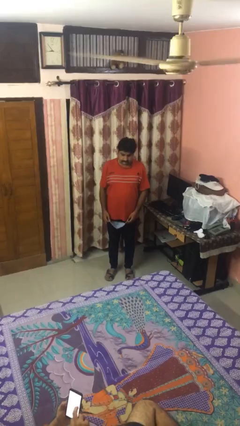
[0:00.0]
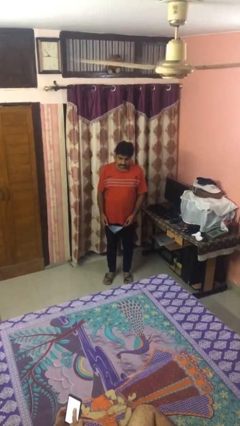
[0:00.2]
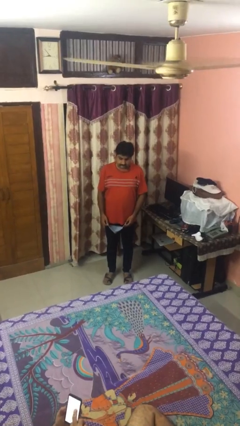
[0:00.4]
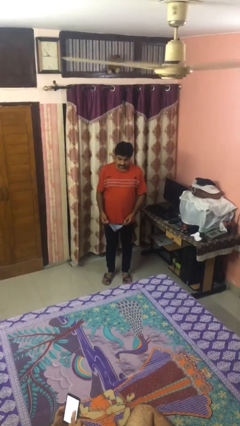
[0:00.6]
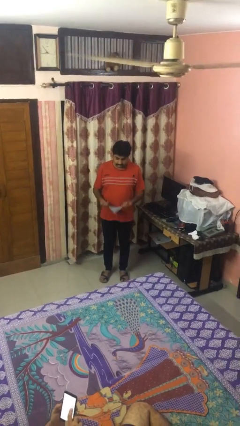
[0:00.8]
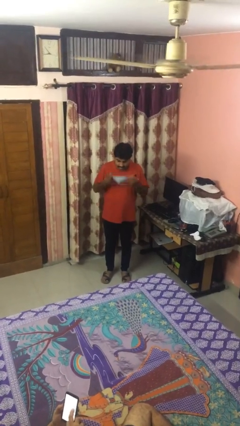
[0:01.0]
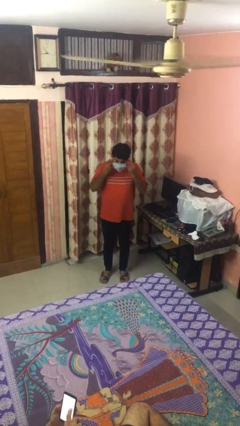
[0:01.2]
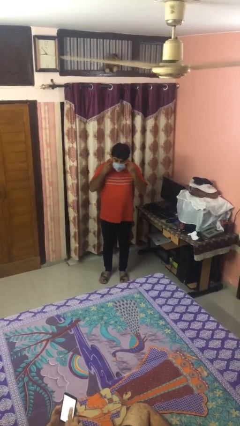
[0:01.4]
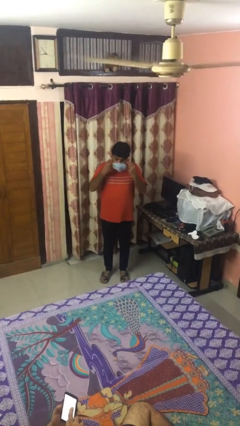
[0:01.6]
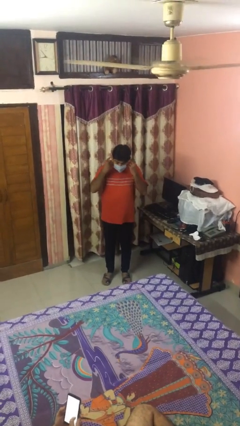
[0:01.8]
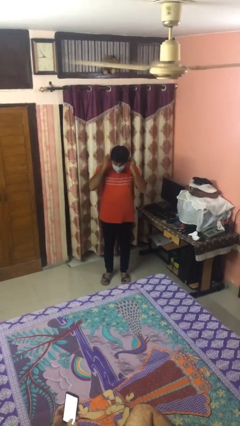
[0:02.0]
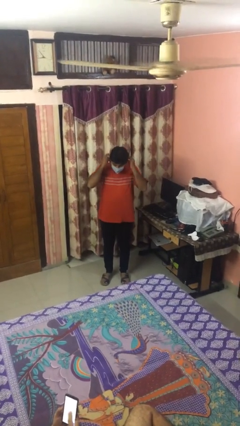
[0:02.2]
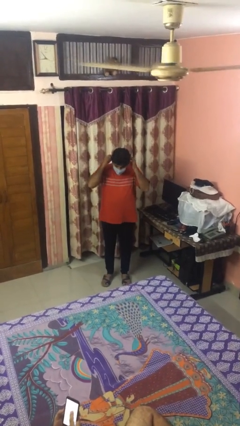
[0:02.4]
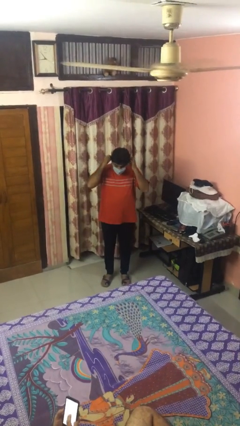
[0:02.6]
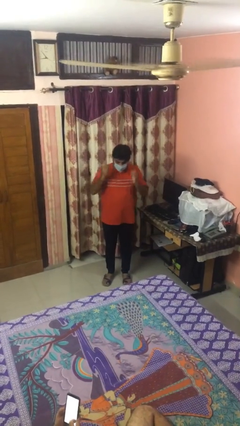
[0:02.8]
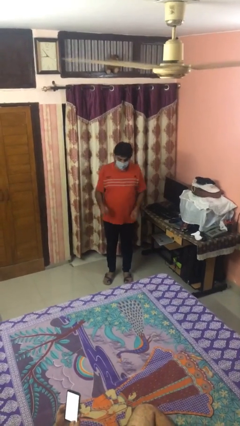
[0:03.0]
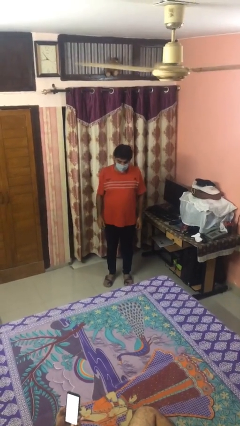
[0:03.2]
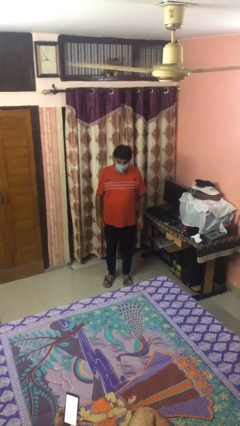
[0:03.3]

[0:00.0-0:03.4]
person puts on facemask

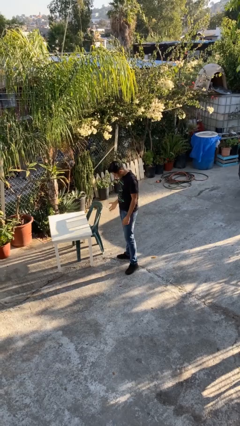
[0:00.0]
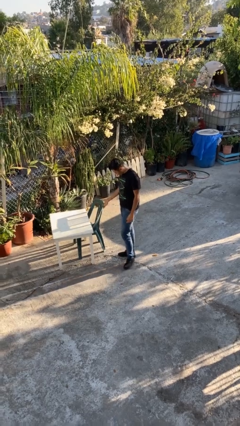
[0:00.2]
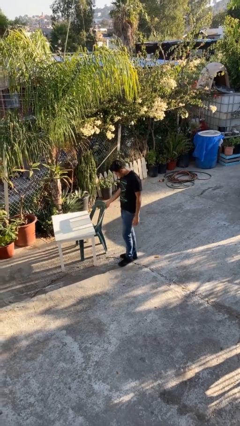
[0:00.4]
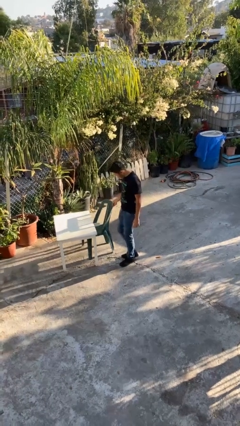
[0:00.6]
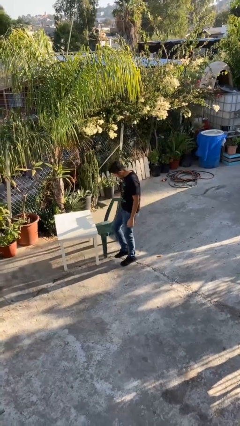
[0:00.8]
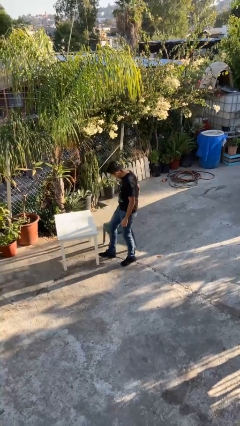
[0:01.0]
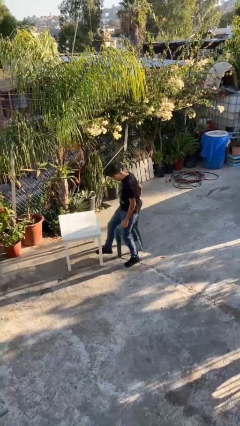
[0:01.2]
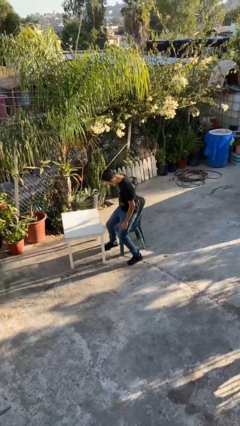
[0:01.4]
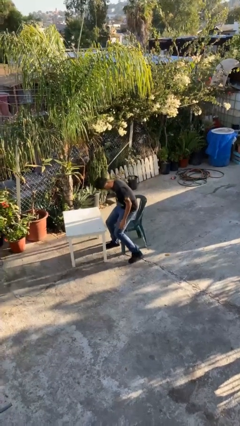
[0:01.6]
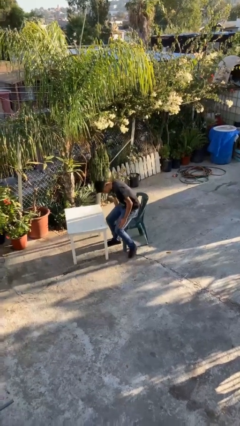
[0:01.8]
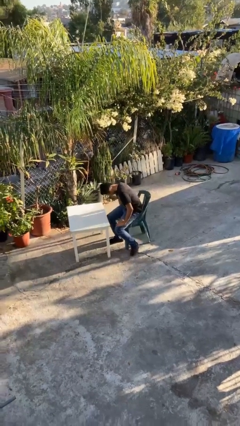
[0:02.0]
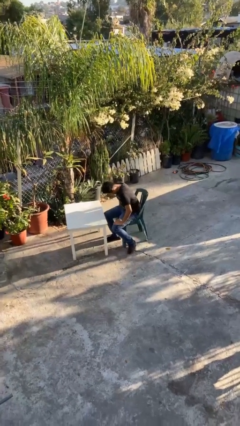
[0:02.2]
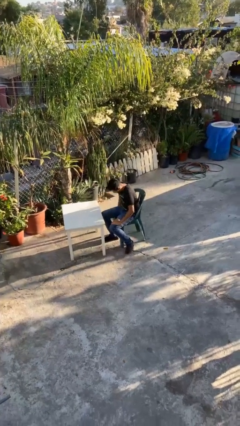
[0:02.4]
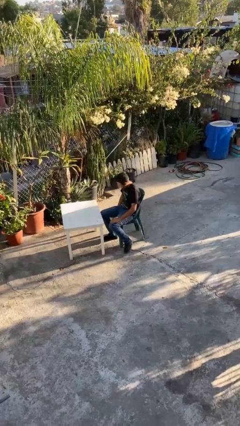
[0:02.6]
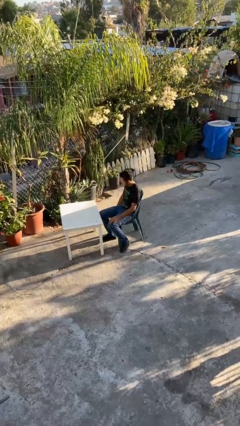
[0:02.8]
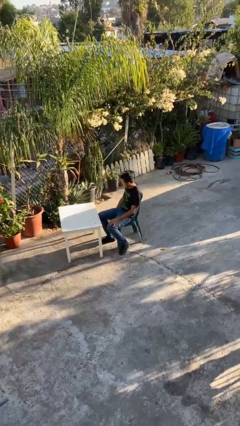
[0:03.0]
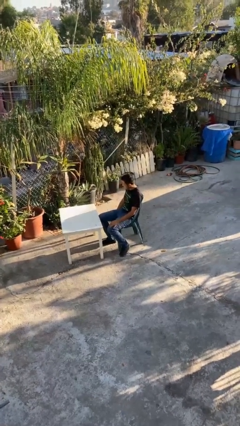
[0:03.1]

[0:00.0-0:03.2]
person sits down

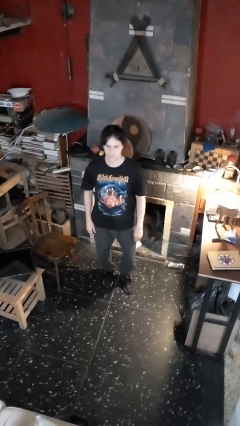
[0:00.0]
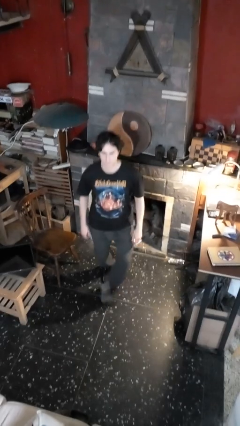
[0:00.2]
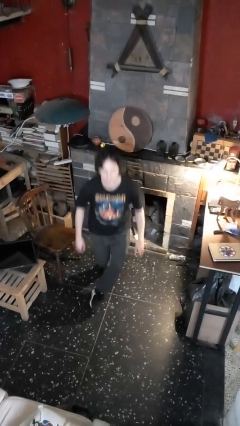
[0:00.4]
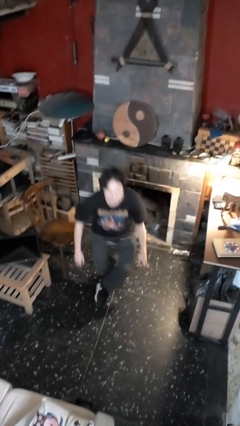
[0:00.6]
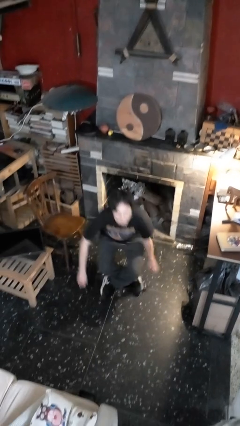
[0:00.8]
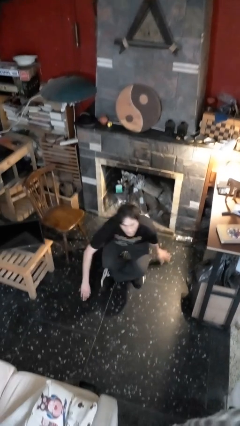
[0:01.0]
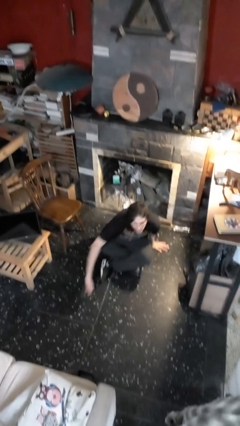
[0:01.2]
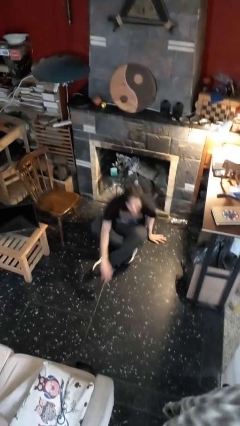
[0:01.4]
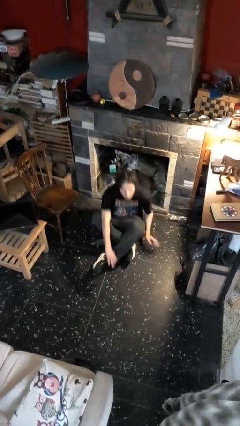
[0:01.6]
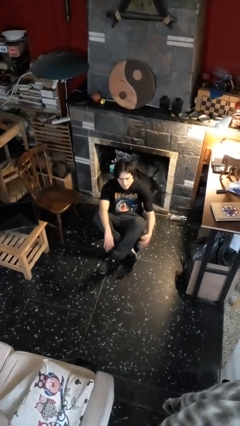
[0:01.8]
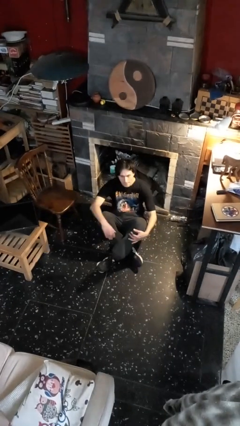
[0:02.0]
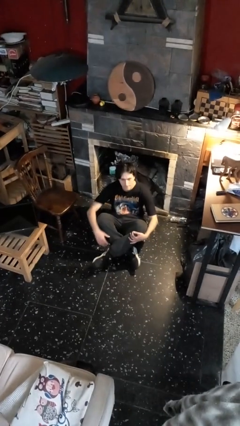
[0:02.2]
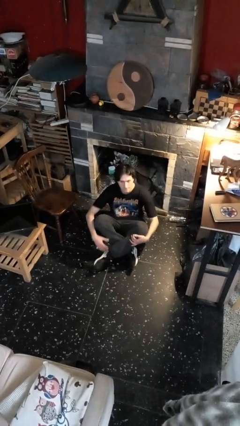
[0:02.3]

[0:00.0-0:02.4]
person sits crisscross

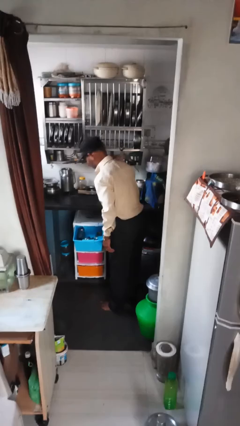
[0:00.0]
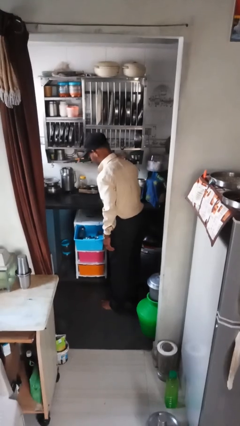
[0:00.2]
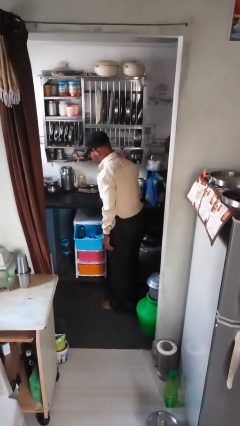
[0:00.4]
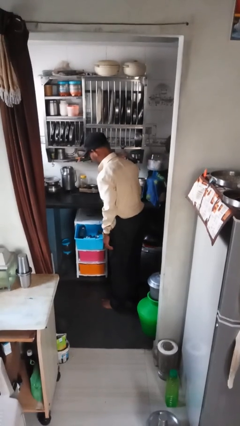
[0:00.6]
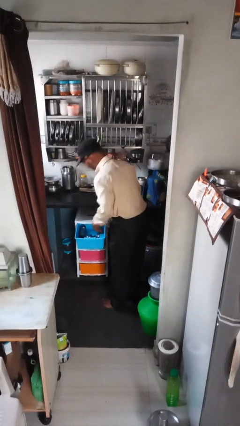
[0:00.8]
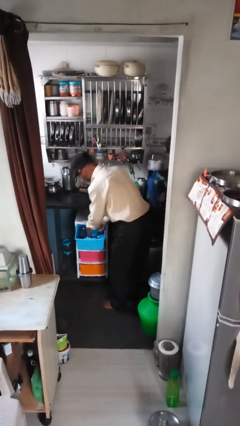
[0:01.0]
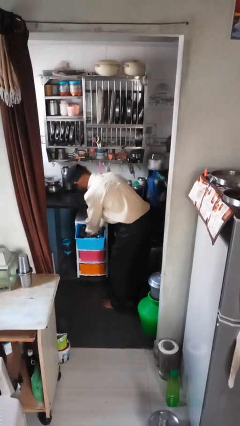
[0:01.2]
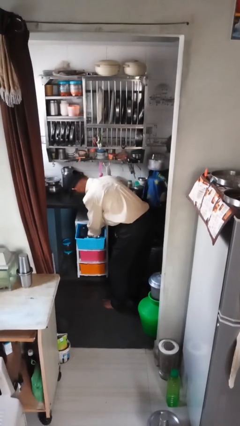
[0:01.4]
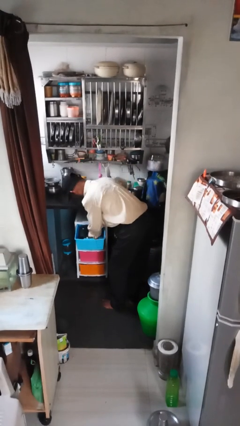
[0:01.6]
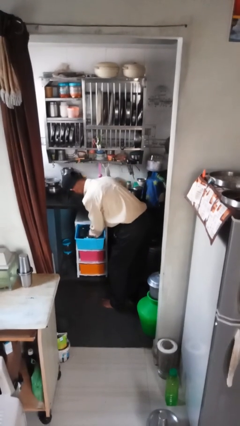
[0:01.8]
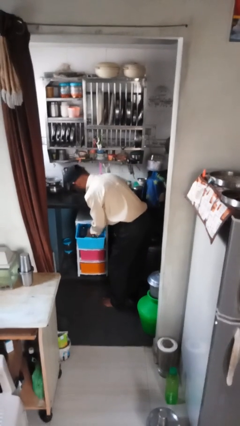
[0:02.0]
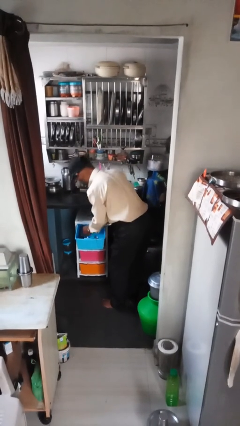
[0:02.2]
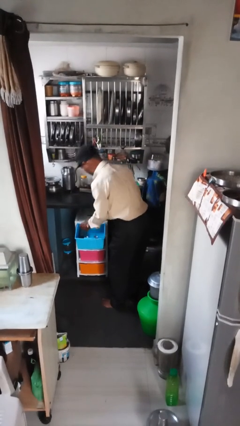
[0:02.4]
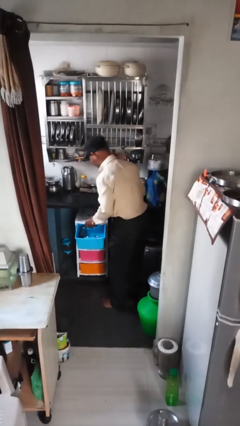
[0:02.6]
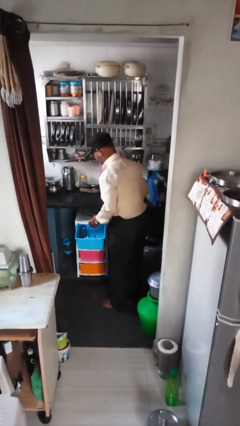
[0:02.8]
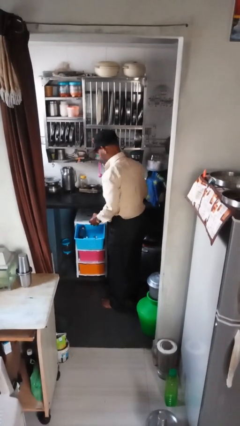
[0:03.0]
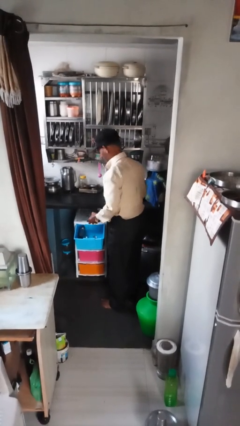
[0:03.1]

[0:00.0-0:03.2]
person takes object from kitchen drawer

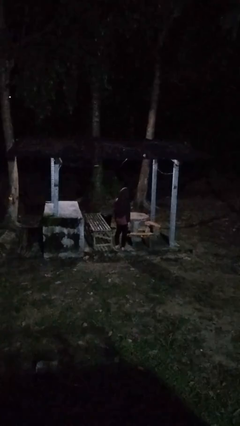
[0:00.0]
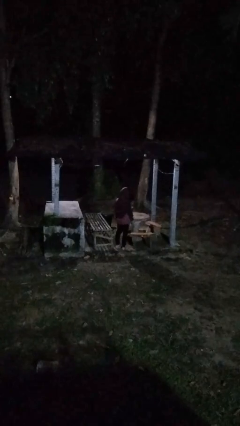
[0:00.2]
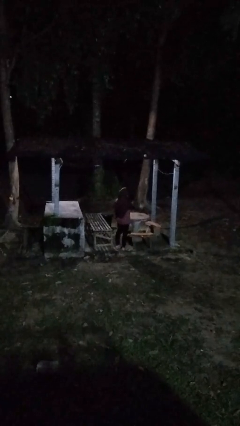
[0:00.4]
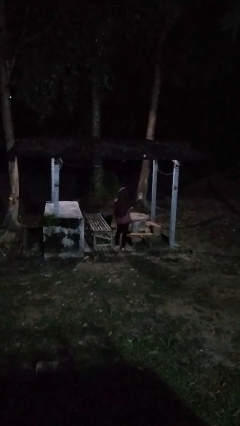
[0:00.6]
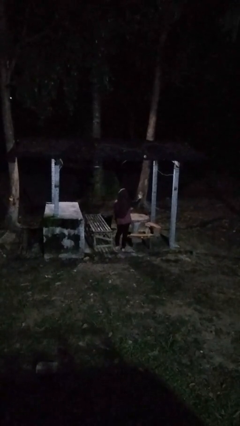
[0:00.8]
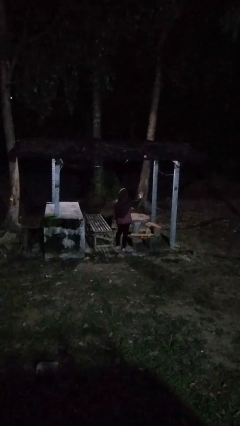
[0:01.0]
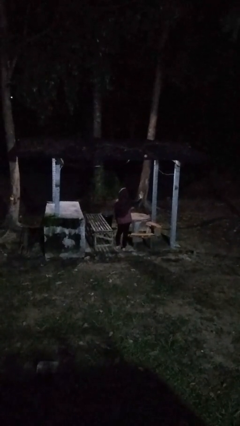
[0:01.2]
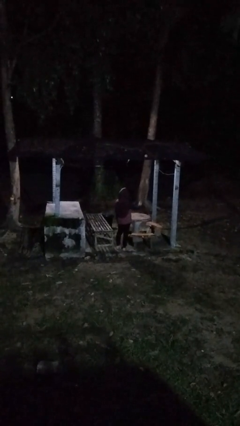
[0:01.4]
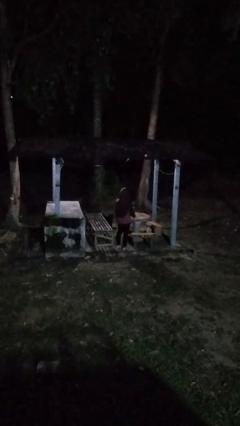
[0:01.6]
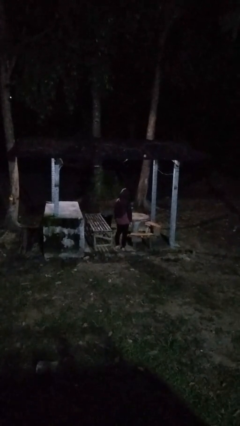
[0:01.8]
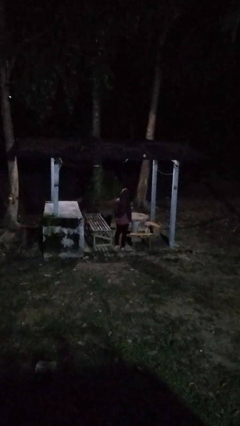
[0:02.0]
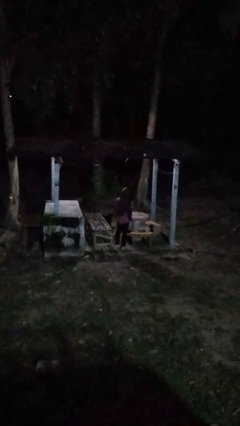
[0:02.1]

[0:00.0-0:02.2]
person gestures stop

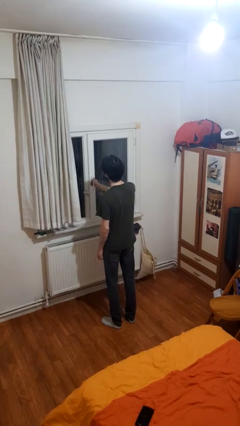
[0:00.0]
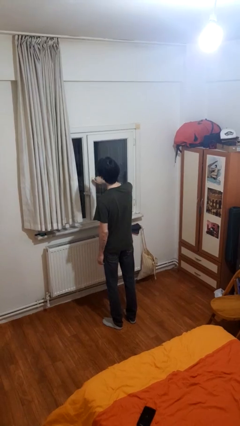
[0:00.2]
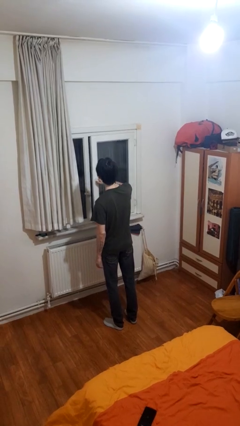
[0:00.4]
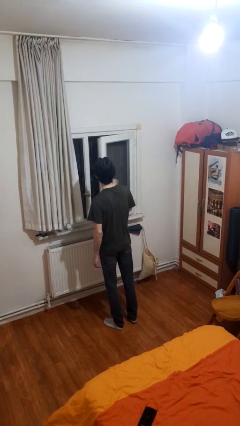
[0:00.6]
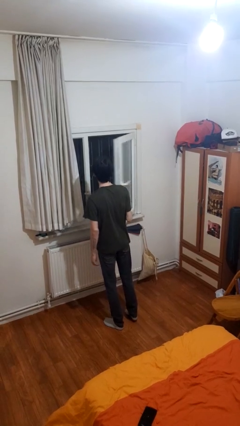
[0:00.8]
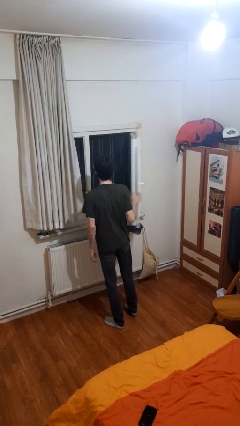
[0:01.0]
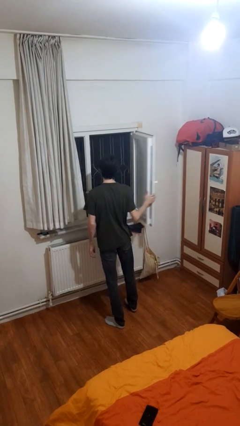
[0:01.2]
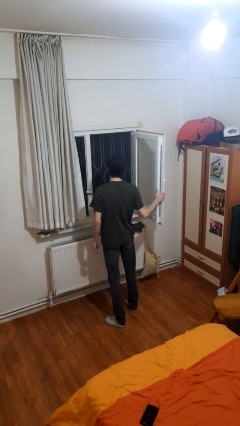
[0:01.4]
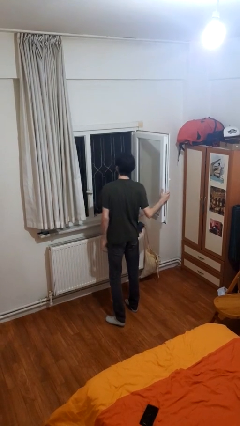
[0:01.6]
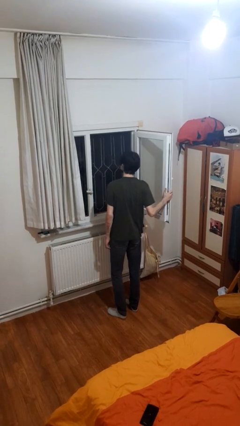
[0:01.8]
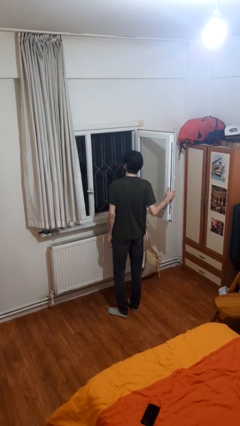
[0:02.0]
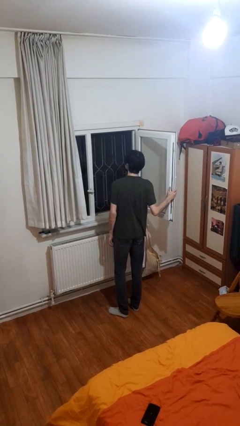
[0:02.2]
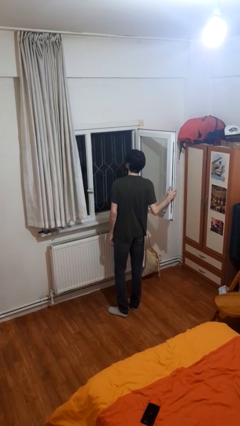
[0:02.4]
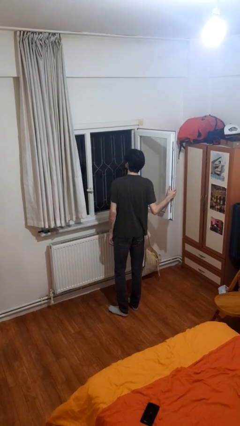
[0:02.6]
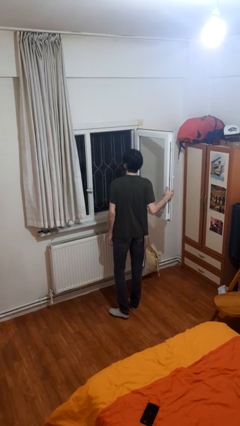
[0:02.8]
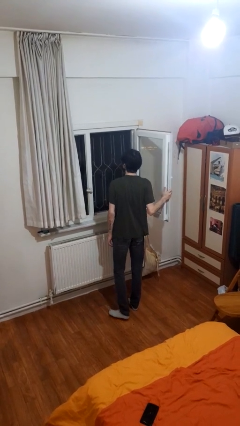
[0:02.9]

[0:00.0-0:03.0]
person opens home window
